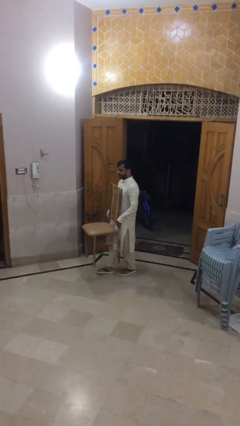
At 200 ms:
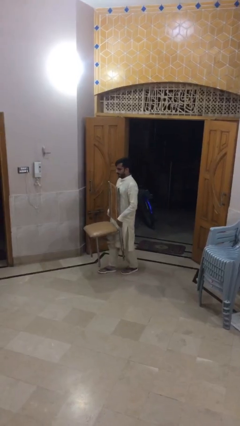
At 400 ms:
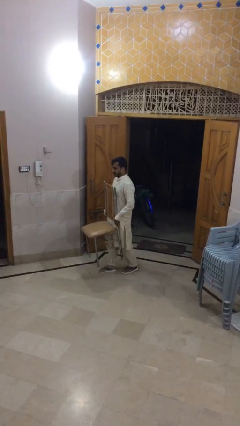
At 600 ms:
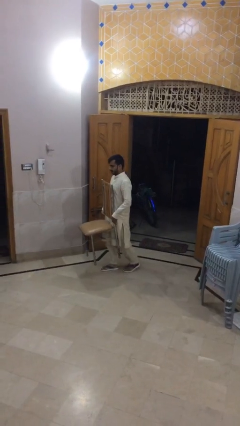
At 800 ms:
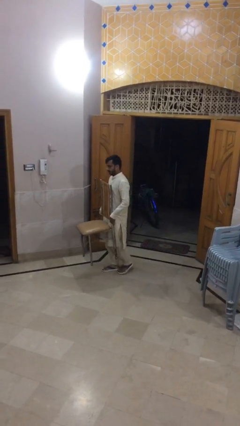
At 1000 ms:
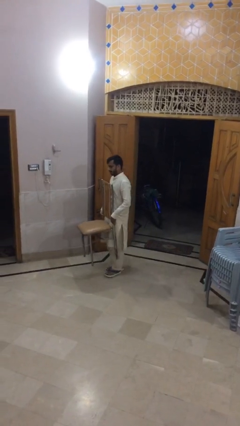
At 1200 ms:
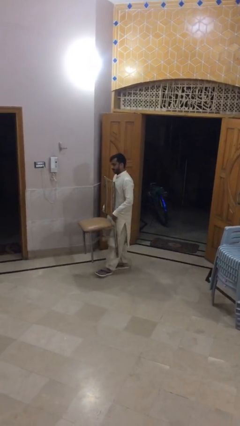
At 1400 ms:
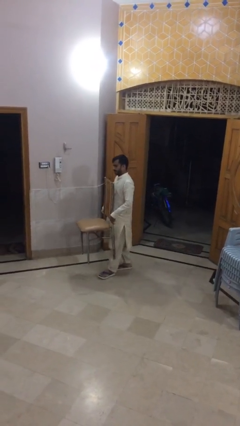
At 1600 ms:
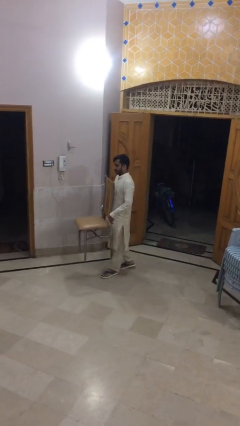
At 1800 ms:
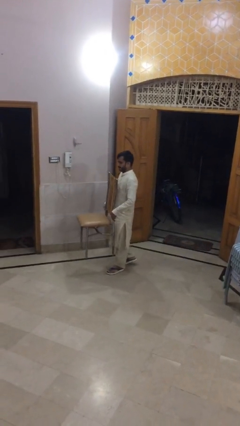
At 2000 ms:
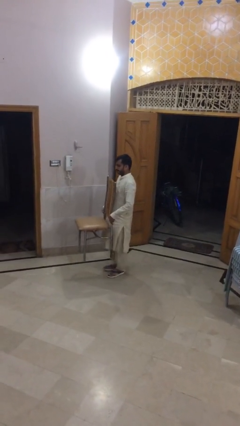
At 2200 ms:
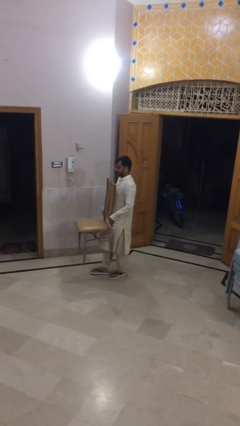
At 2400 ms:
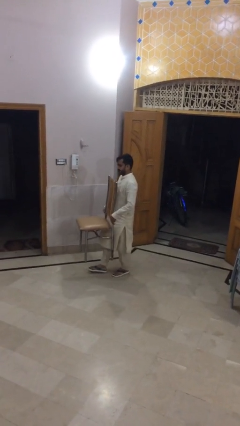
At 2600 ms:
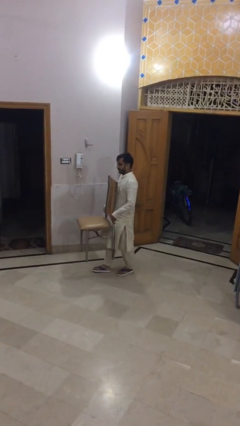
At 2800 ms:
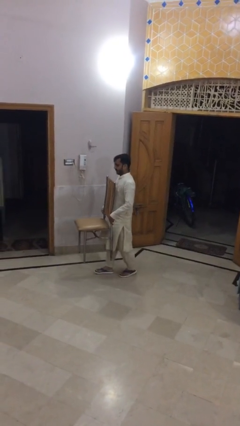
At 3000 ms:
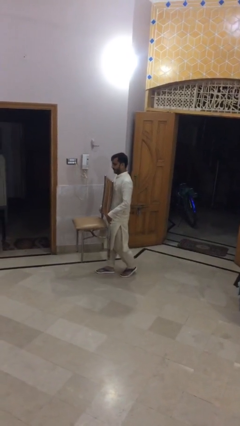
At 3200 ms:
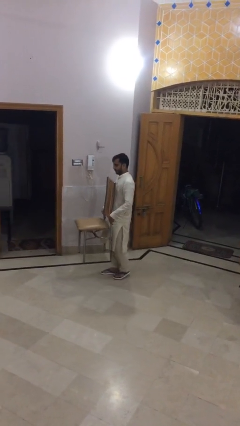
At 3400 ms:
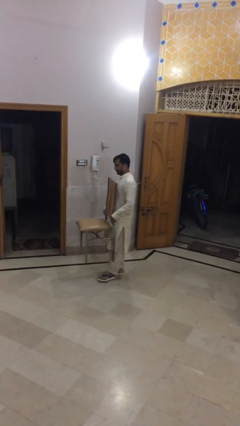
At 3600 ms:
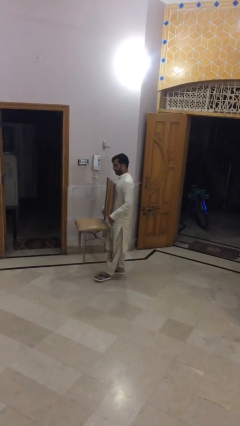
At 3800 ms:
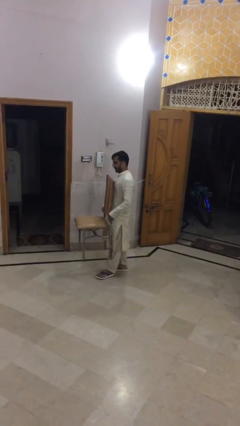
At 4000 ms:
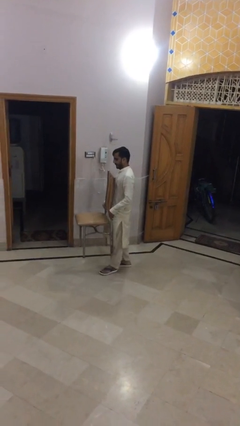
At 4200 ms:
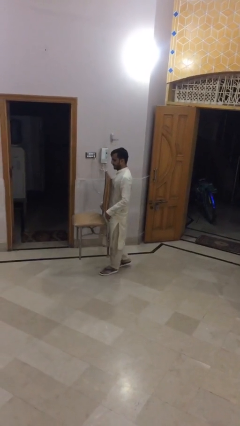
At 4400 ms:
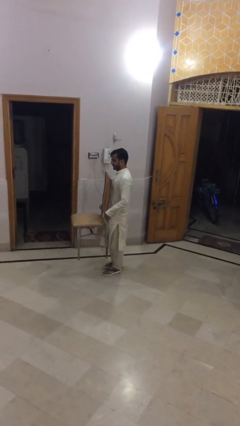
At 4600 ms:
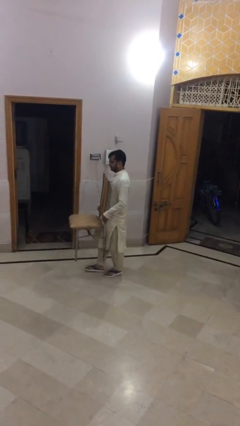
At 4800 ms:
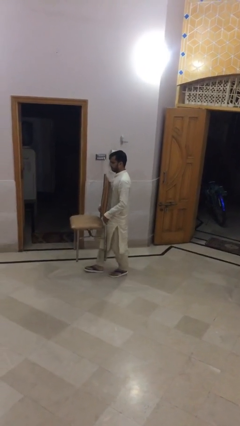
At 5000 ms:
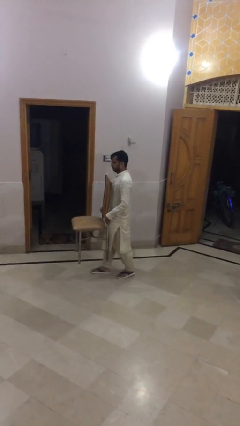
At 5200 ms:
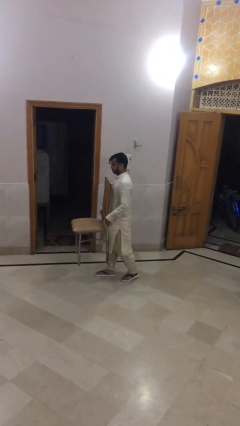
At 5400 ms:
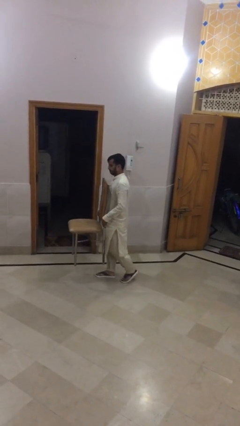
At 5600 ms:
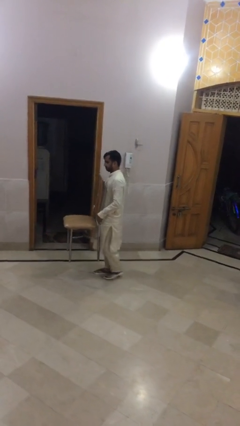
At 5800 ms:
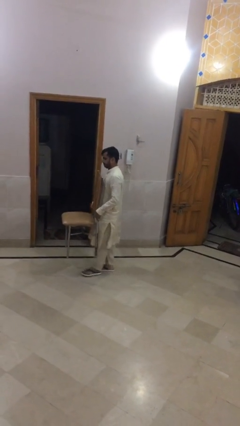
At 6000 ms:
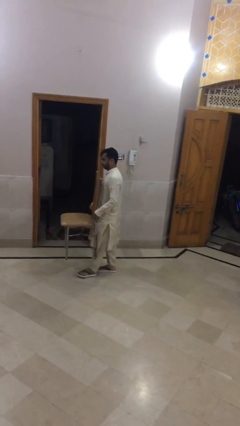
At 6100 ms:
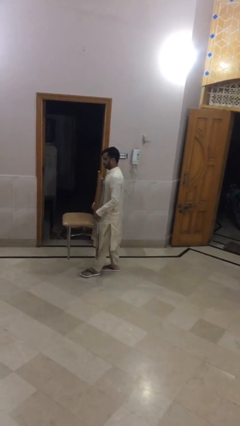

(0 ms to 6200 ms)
person carries heavy object

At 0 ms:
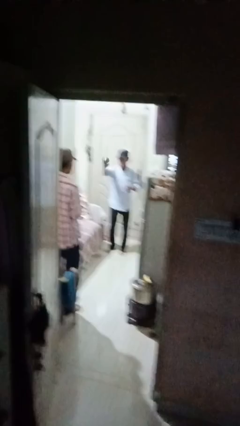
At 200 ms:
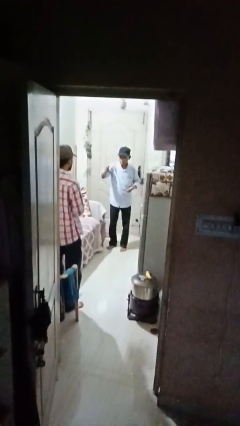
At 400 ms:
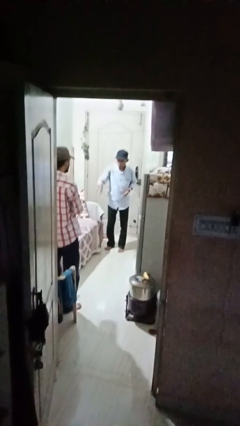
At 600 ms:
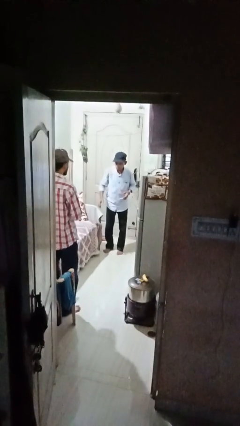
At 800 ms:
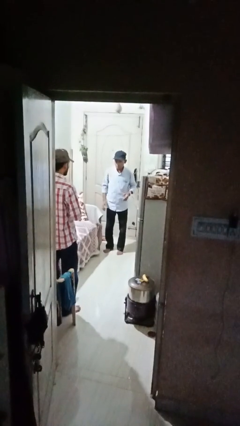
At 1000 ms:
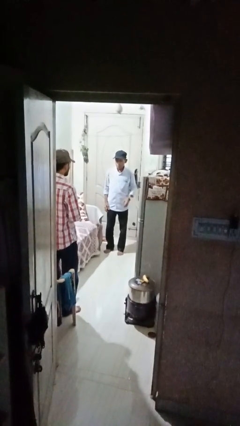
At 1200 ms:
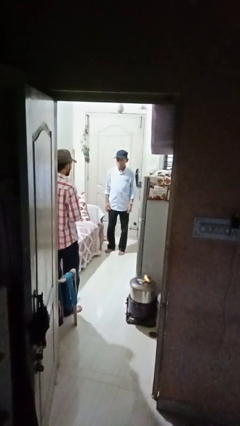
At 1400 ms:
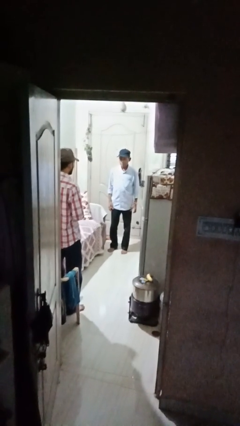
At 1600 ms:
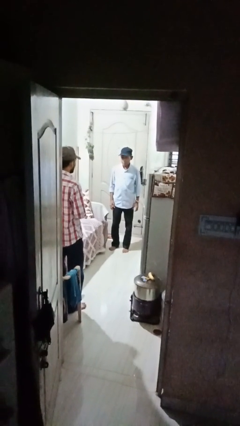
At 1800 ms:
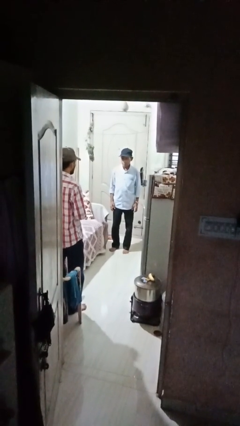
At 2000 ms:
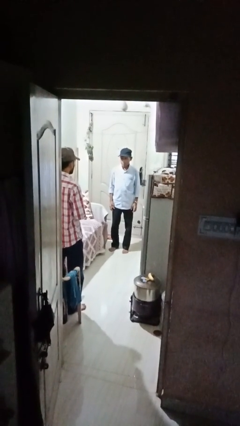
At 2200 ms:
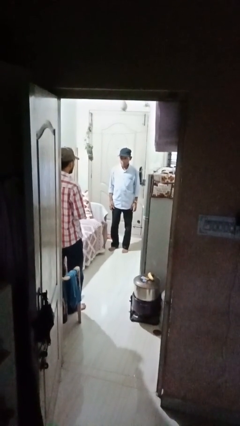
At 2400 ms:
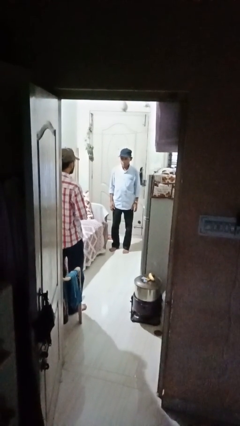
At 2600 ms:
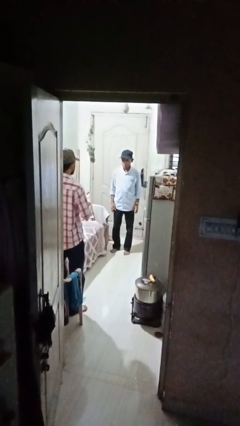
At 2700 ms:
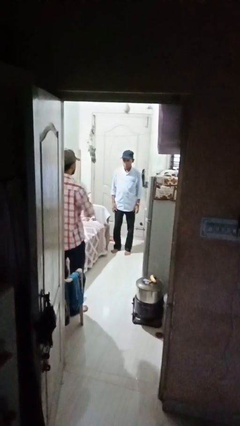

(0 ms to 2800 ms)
person throws object to person

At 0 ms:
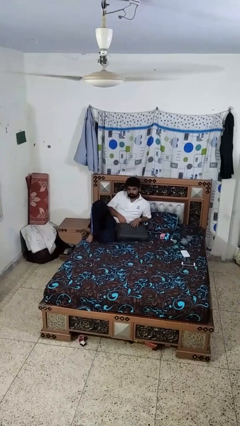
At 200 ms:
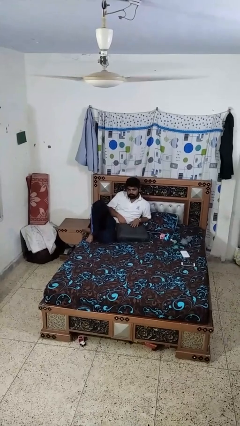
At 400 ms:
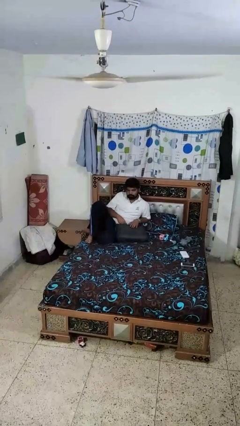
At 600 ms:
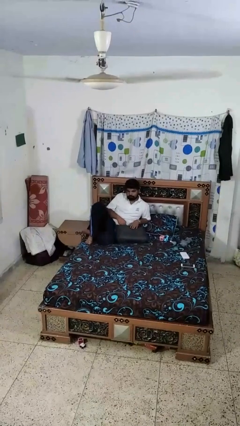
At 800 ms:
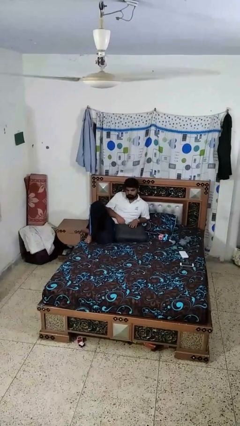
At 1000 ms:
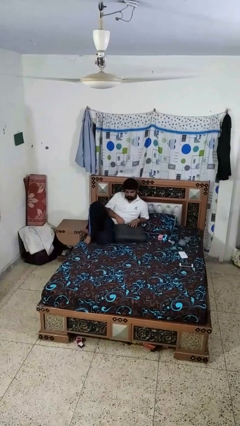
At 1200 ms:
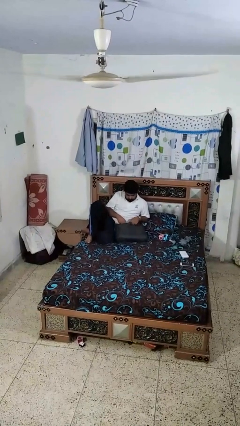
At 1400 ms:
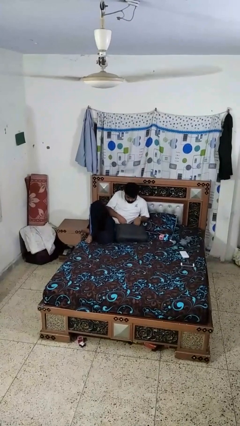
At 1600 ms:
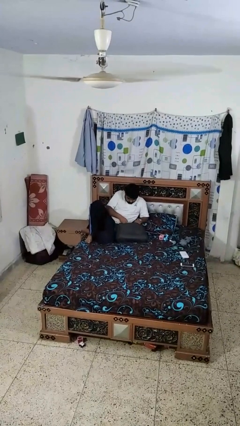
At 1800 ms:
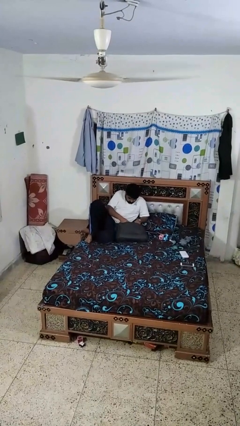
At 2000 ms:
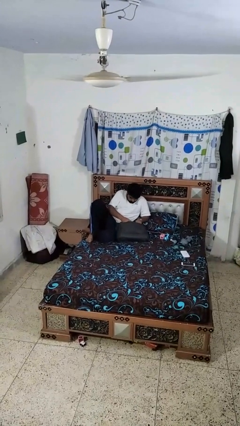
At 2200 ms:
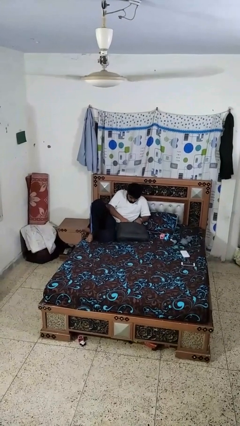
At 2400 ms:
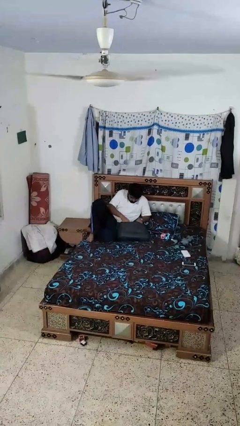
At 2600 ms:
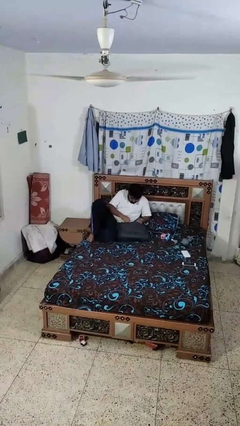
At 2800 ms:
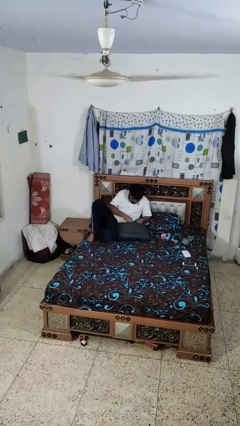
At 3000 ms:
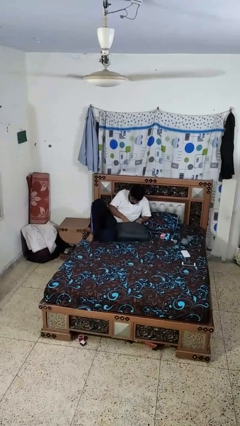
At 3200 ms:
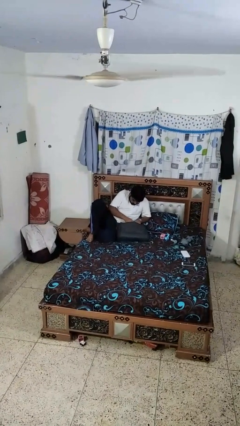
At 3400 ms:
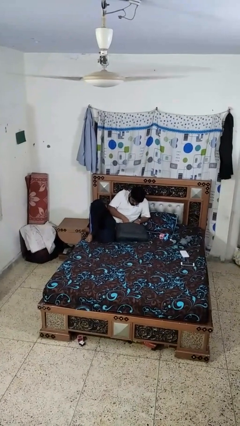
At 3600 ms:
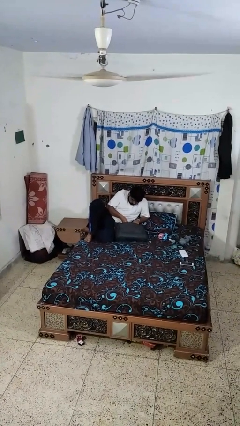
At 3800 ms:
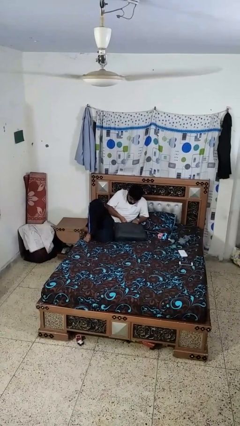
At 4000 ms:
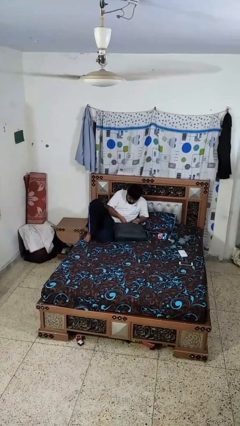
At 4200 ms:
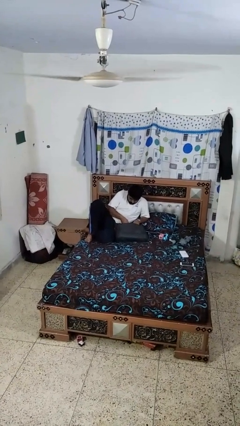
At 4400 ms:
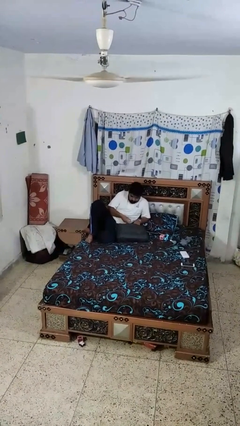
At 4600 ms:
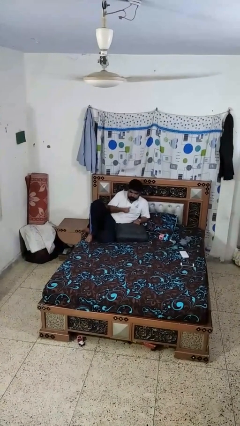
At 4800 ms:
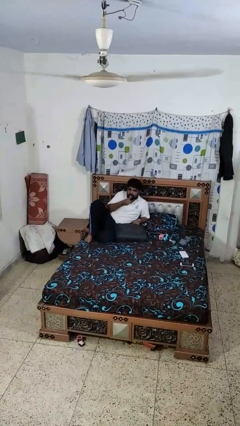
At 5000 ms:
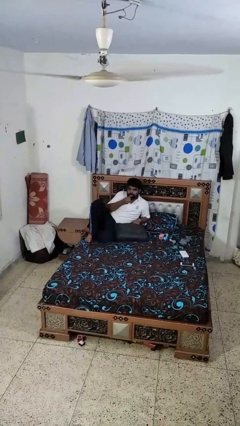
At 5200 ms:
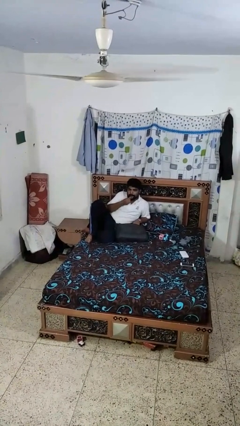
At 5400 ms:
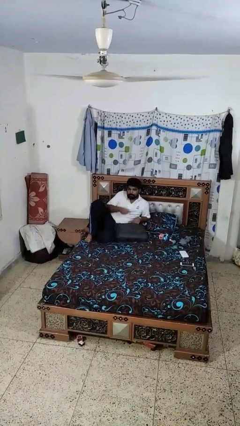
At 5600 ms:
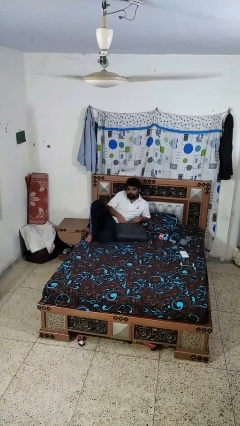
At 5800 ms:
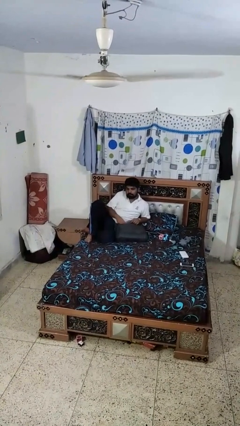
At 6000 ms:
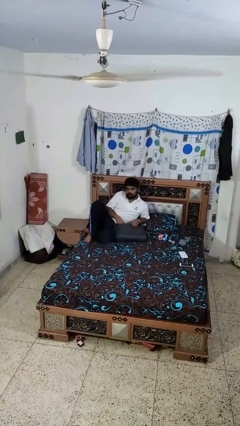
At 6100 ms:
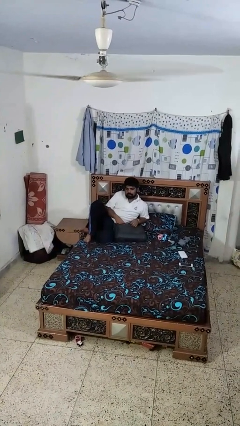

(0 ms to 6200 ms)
person eats snack from bag

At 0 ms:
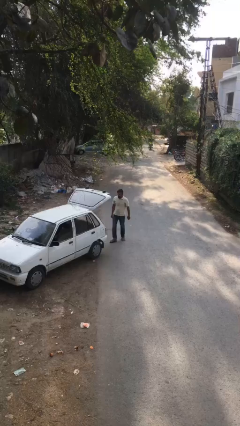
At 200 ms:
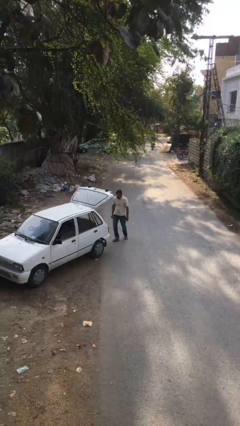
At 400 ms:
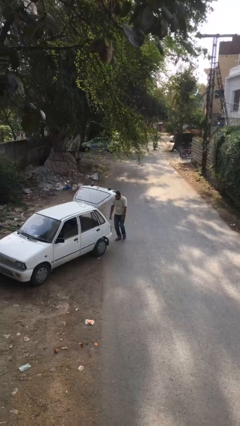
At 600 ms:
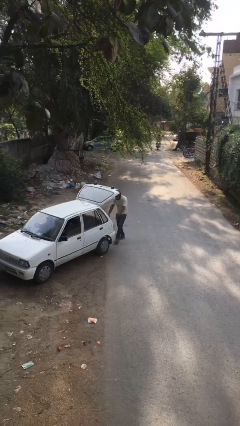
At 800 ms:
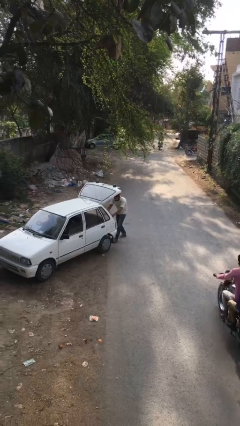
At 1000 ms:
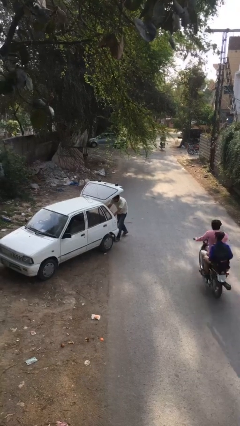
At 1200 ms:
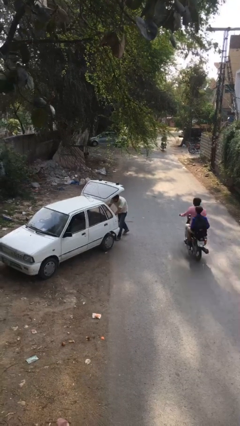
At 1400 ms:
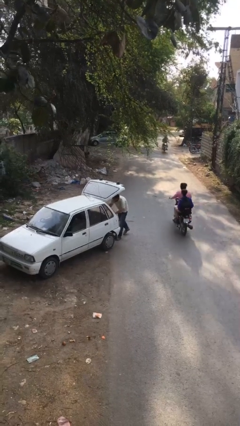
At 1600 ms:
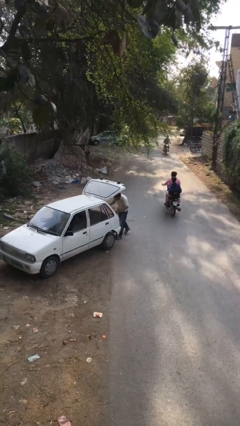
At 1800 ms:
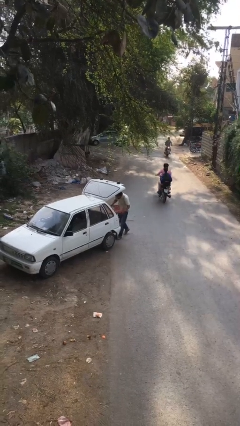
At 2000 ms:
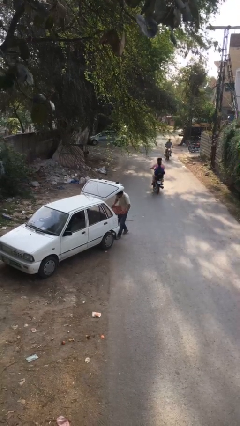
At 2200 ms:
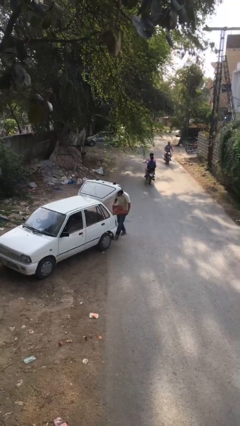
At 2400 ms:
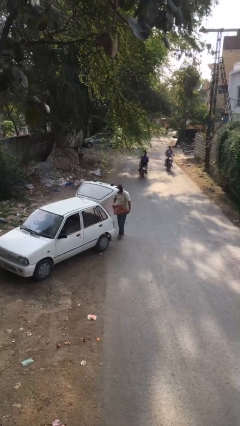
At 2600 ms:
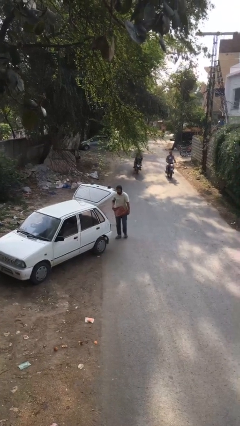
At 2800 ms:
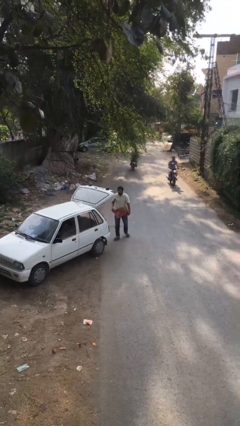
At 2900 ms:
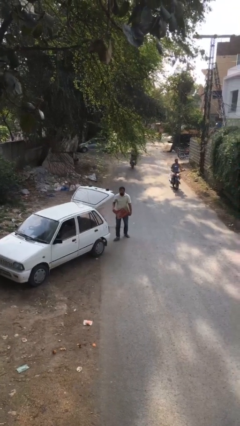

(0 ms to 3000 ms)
person unloads car
